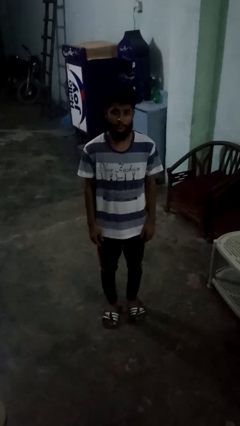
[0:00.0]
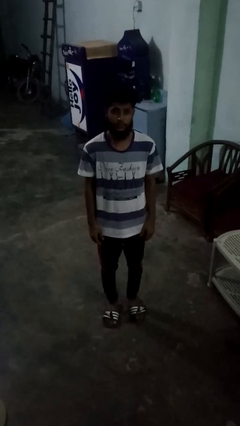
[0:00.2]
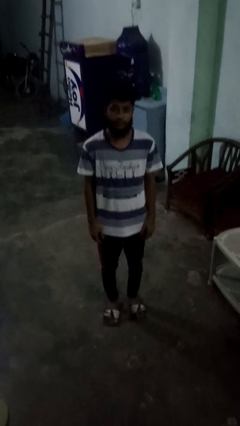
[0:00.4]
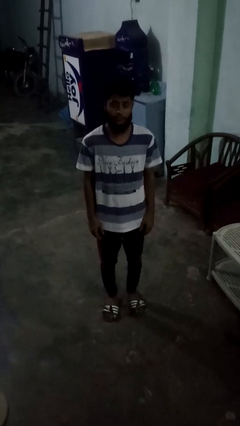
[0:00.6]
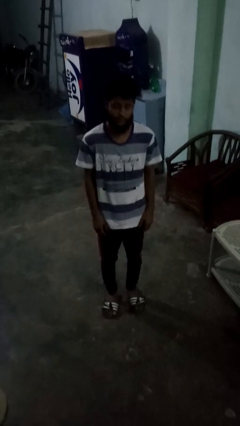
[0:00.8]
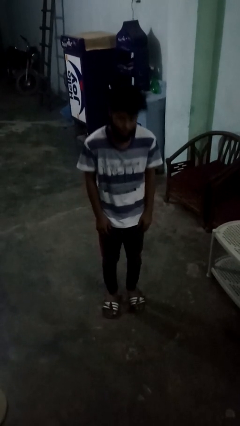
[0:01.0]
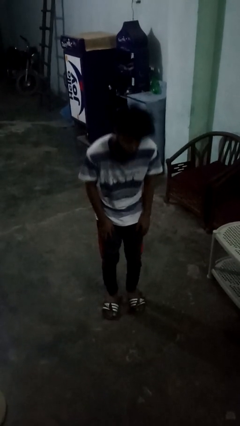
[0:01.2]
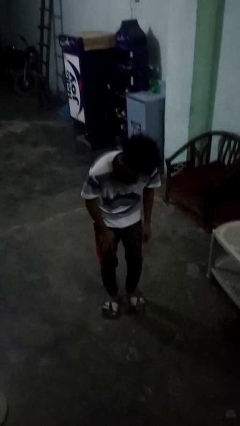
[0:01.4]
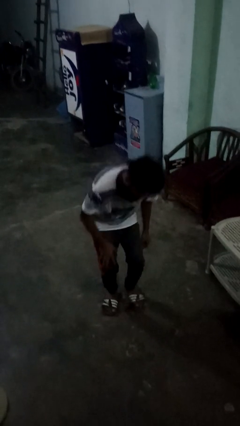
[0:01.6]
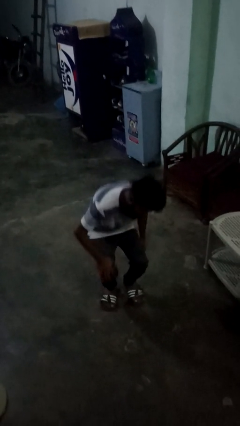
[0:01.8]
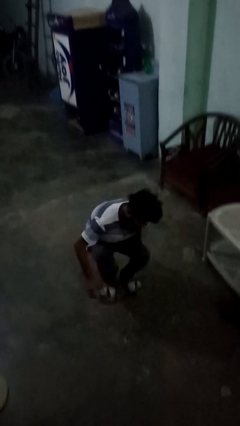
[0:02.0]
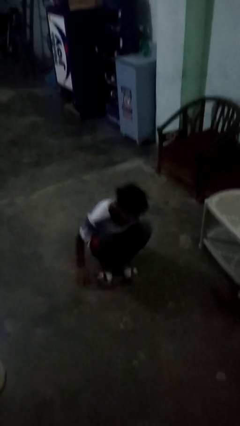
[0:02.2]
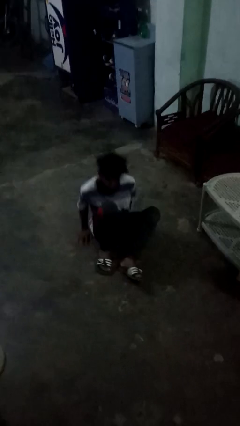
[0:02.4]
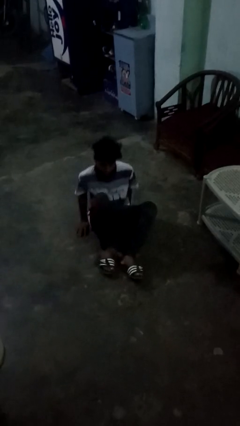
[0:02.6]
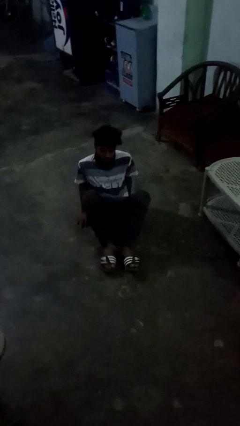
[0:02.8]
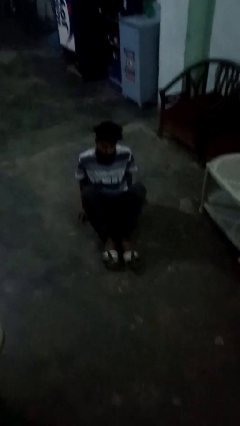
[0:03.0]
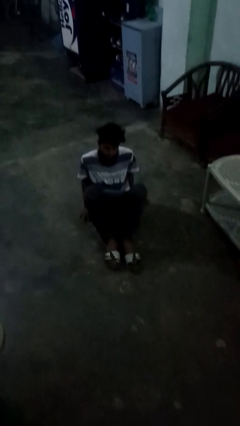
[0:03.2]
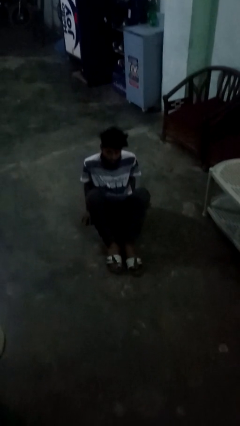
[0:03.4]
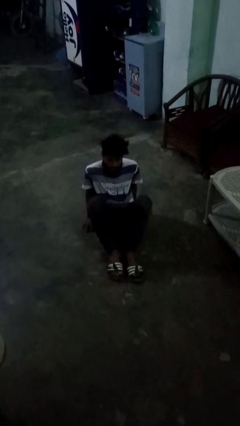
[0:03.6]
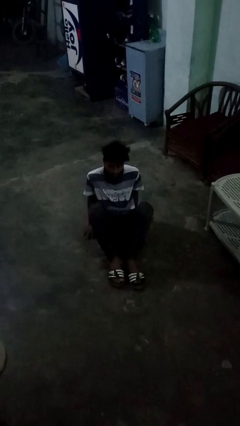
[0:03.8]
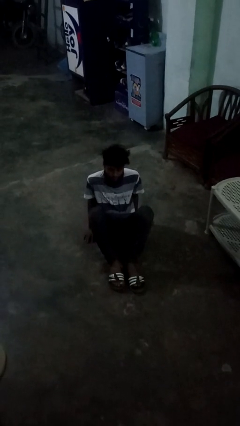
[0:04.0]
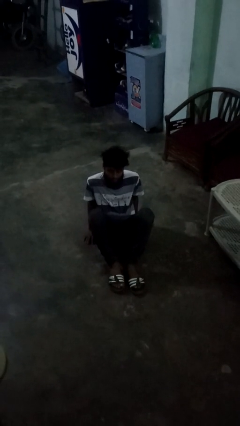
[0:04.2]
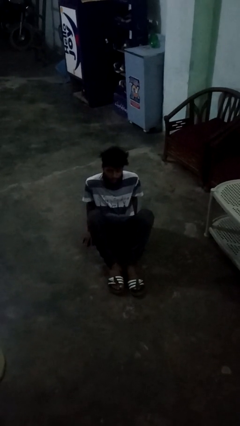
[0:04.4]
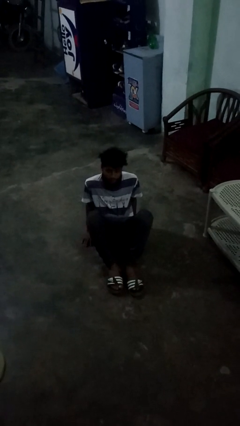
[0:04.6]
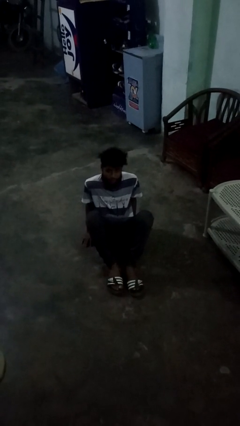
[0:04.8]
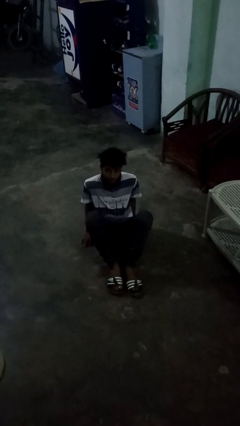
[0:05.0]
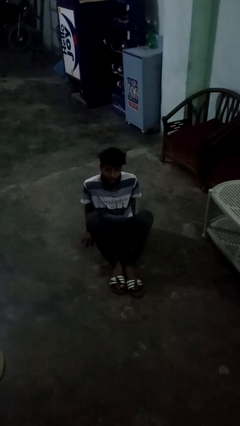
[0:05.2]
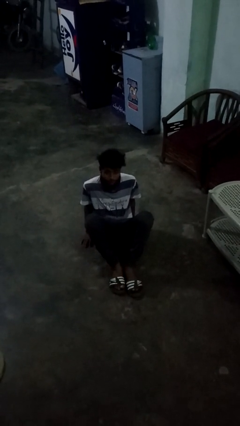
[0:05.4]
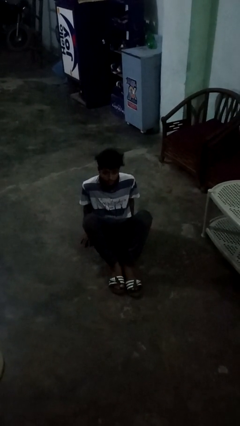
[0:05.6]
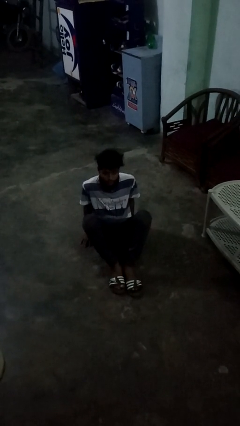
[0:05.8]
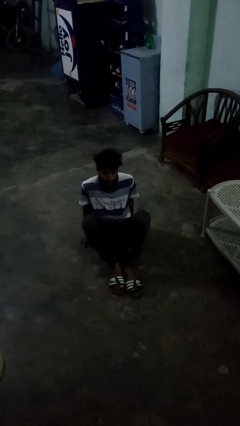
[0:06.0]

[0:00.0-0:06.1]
person falls while standing

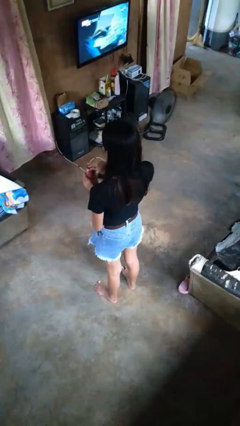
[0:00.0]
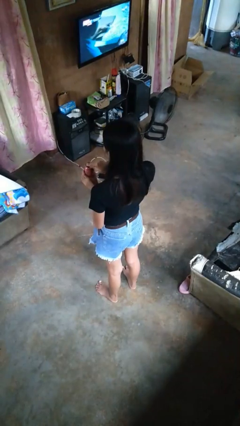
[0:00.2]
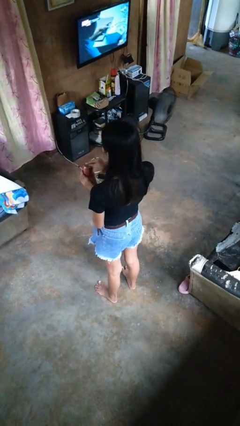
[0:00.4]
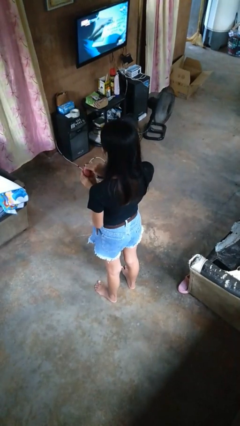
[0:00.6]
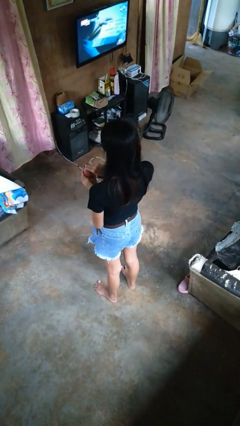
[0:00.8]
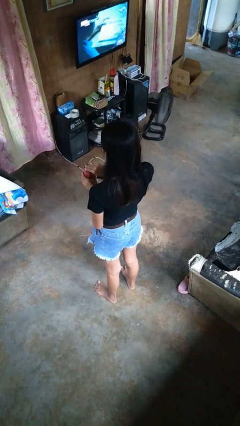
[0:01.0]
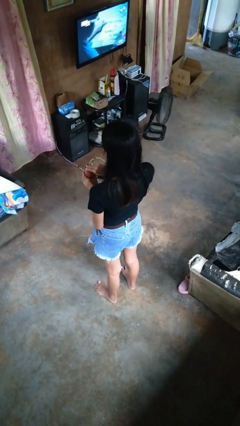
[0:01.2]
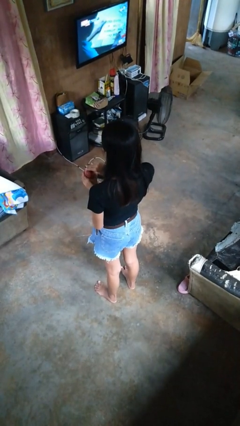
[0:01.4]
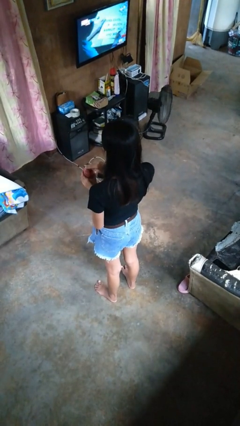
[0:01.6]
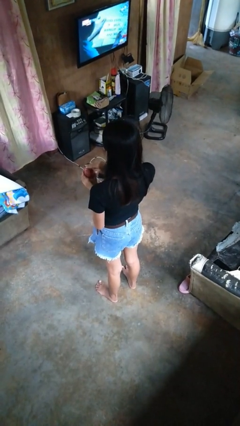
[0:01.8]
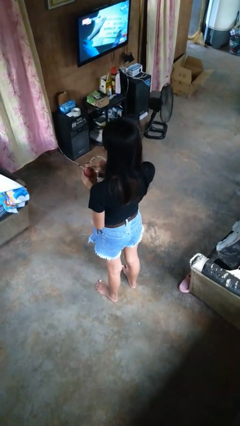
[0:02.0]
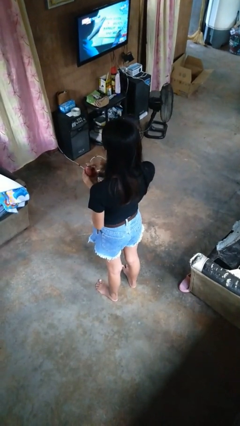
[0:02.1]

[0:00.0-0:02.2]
person opens beverage can

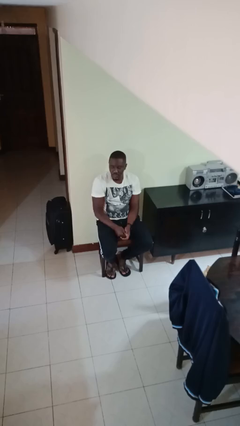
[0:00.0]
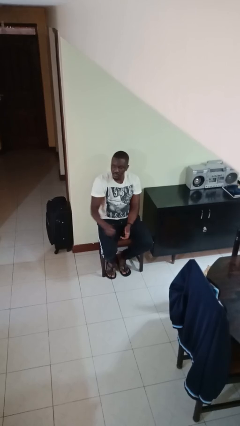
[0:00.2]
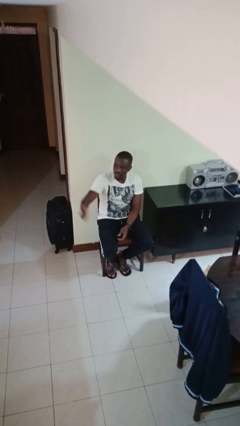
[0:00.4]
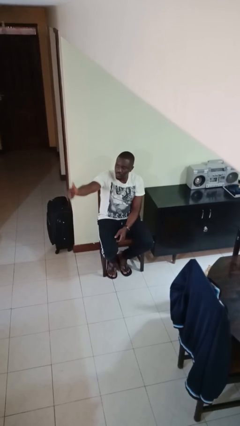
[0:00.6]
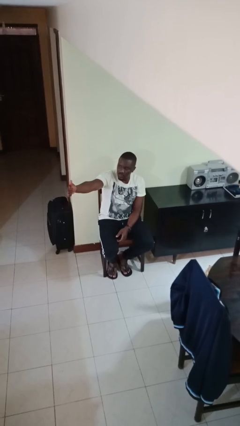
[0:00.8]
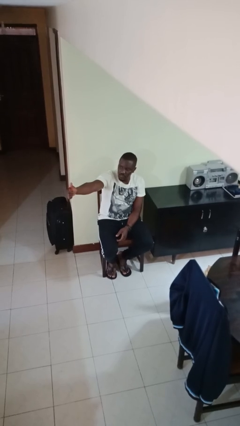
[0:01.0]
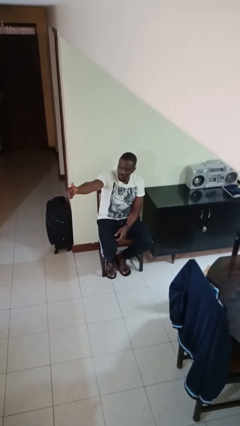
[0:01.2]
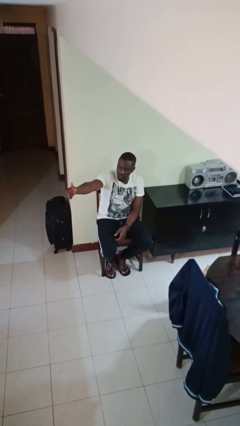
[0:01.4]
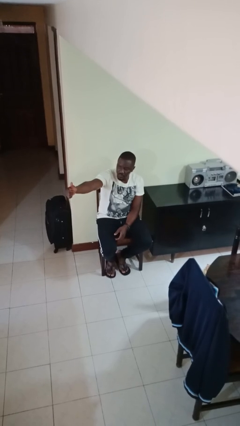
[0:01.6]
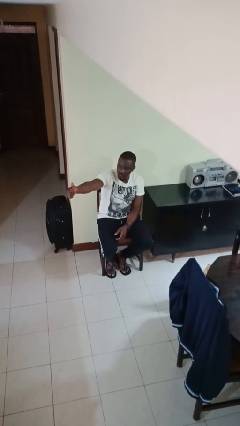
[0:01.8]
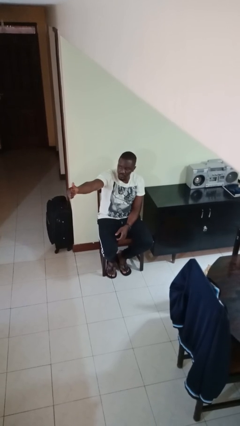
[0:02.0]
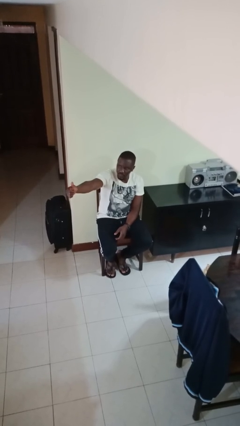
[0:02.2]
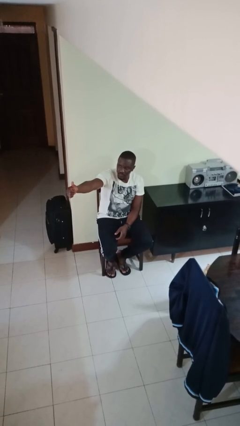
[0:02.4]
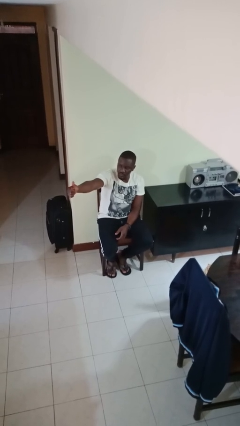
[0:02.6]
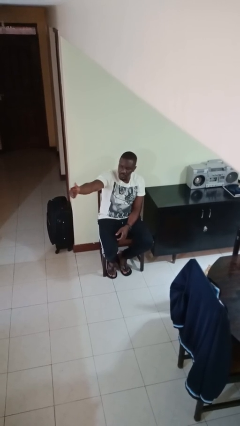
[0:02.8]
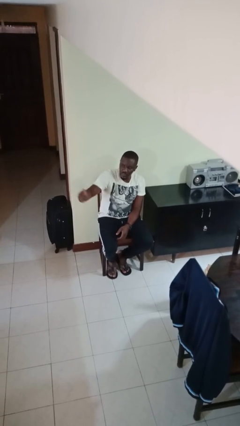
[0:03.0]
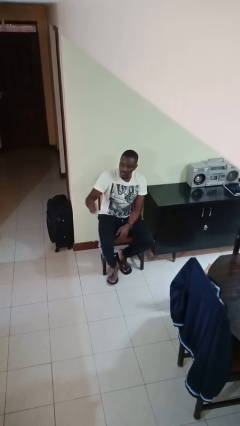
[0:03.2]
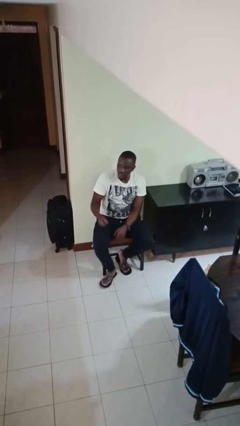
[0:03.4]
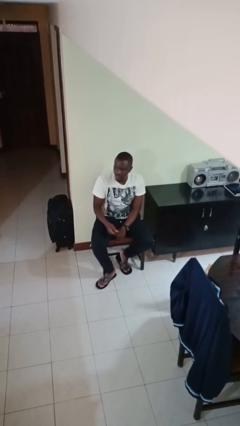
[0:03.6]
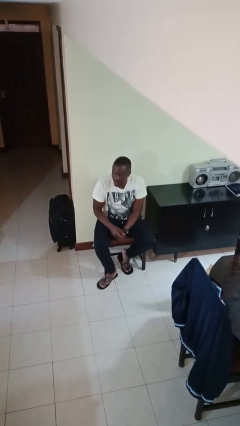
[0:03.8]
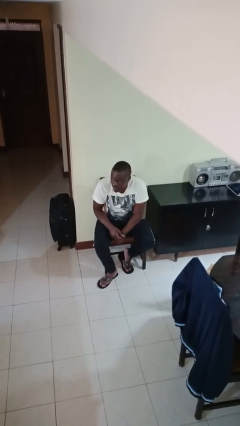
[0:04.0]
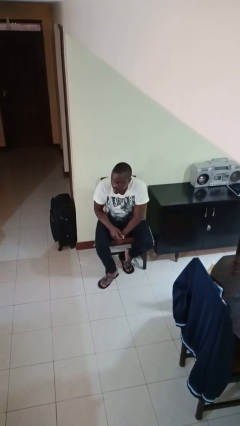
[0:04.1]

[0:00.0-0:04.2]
person gestures thumbs up

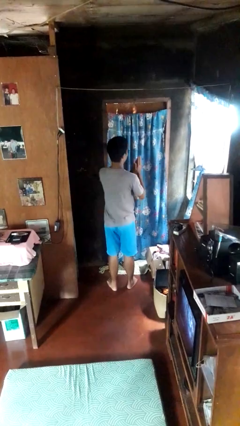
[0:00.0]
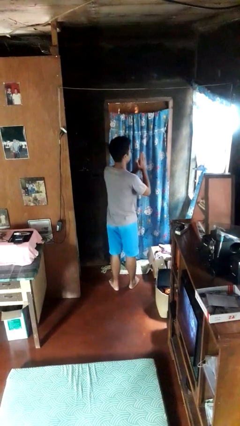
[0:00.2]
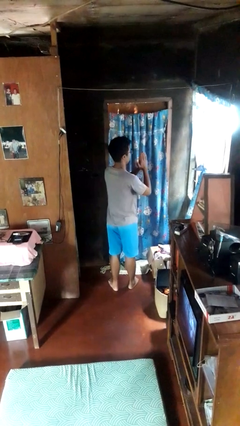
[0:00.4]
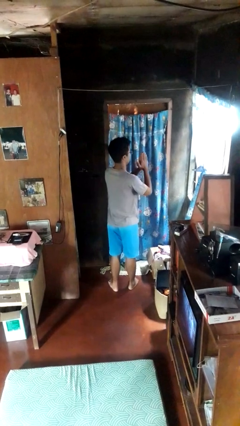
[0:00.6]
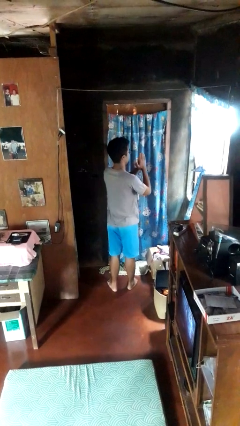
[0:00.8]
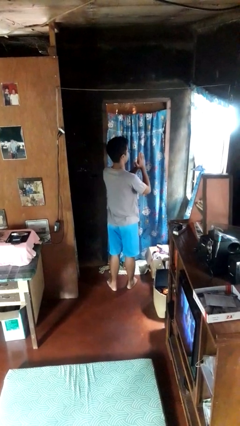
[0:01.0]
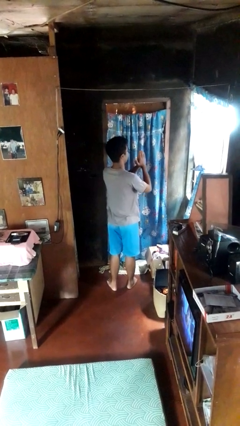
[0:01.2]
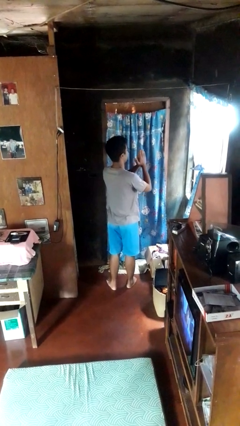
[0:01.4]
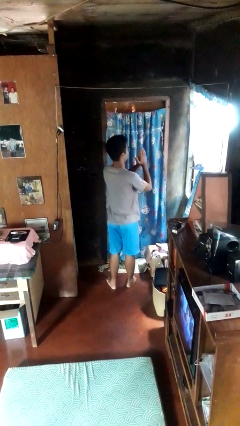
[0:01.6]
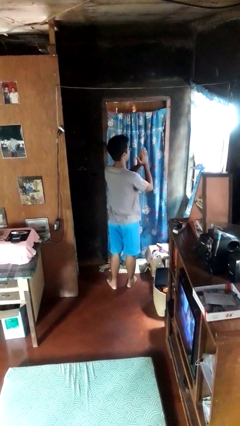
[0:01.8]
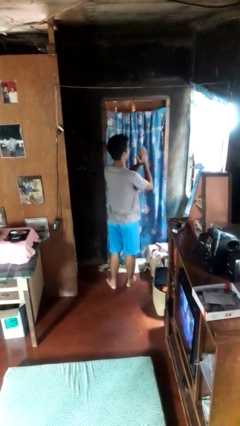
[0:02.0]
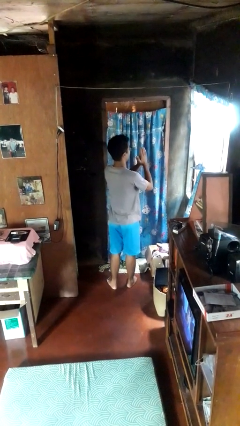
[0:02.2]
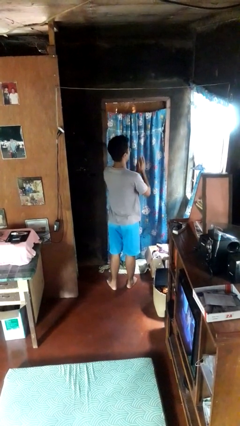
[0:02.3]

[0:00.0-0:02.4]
person prays

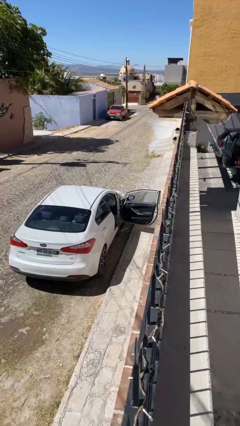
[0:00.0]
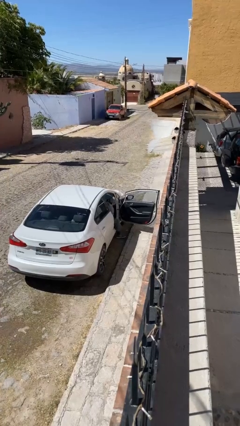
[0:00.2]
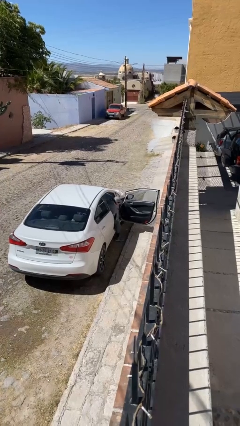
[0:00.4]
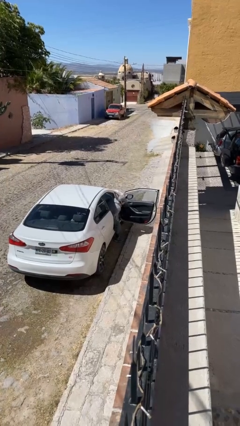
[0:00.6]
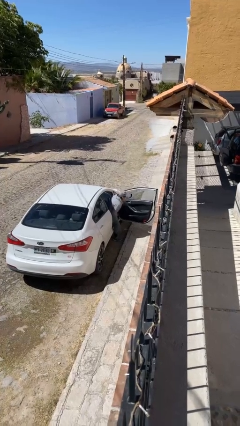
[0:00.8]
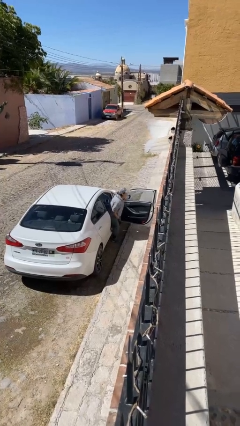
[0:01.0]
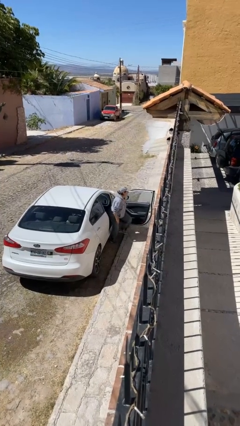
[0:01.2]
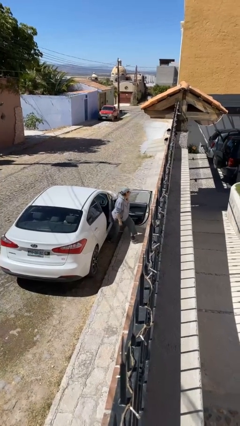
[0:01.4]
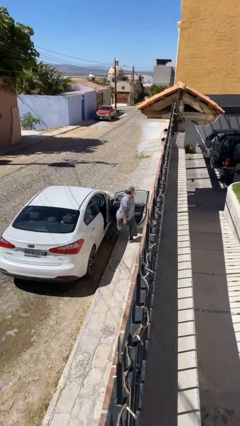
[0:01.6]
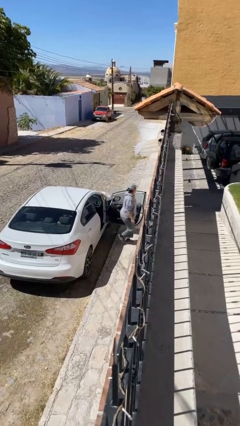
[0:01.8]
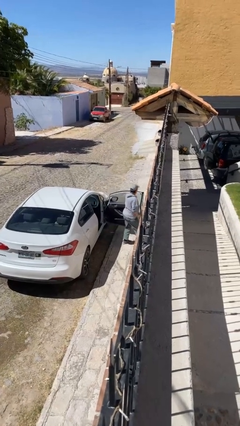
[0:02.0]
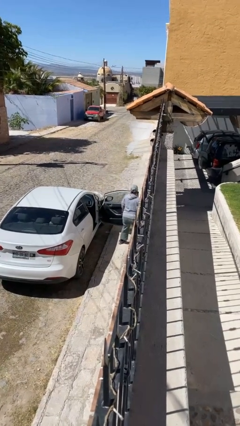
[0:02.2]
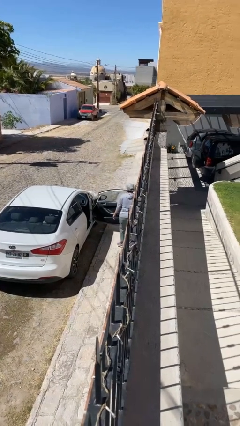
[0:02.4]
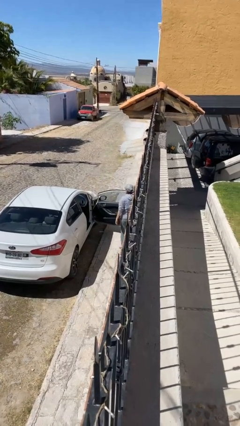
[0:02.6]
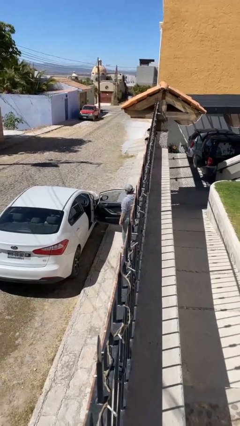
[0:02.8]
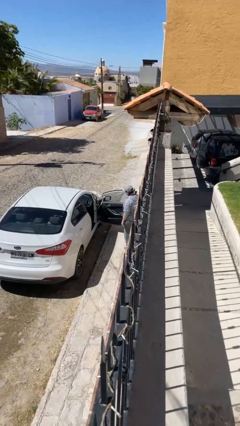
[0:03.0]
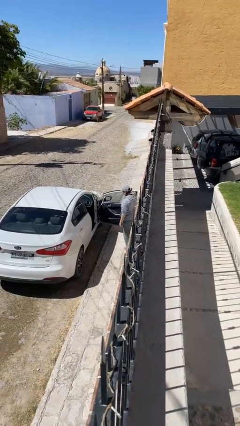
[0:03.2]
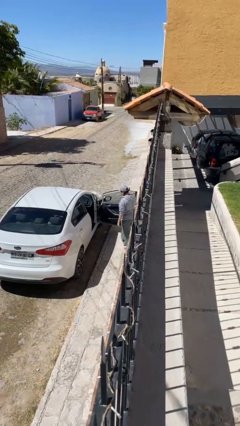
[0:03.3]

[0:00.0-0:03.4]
person exits car

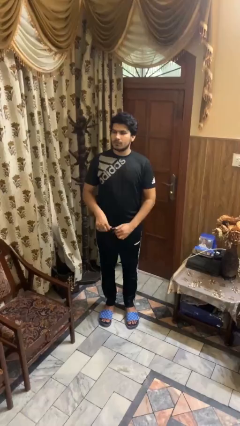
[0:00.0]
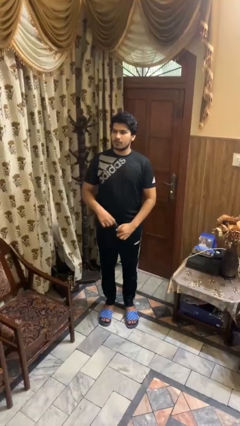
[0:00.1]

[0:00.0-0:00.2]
person puts on wristwatch
